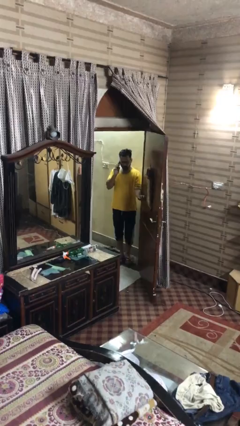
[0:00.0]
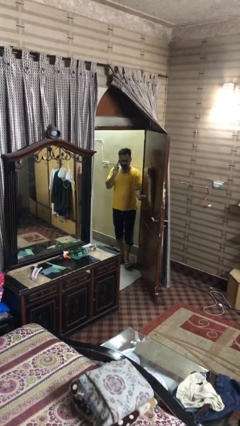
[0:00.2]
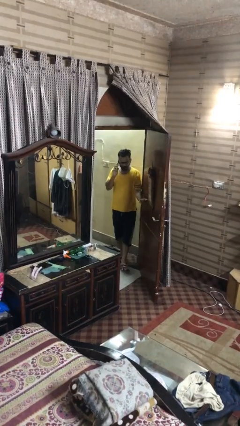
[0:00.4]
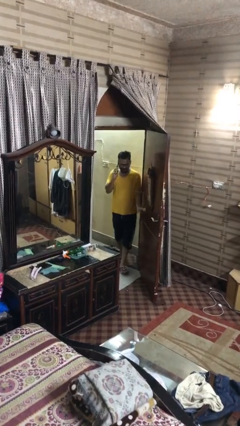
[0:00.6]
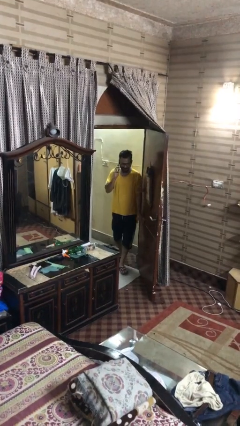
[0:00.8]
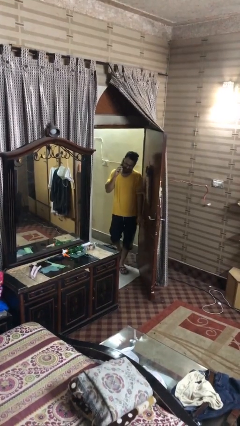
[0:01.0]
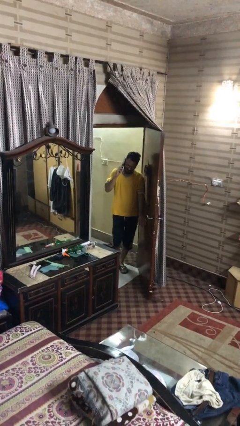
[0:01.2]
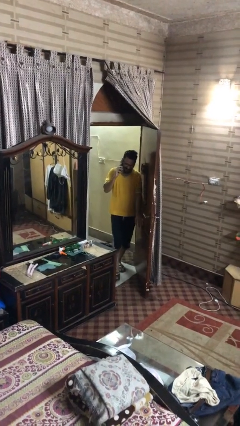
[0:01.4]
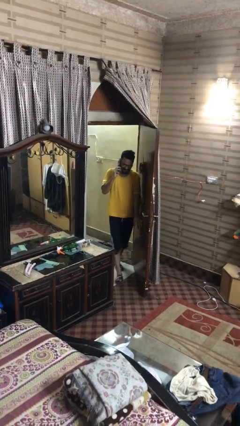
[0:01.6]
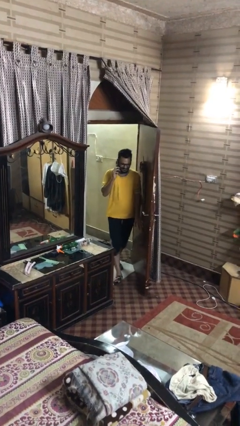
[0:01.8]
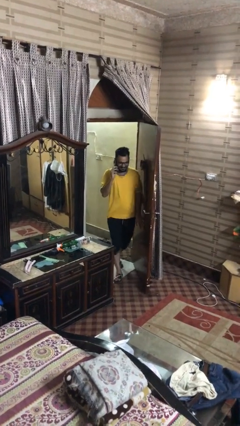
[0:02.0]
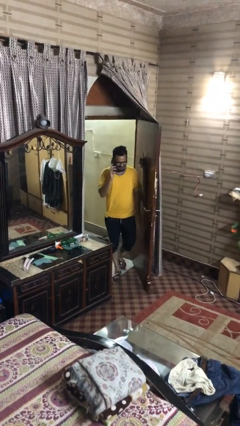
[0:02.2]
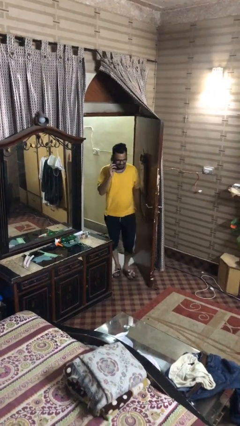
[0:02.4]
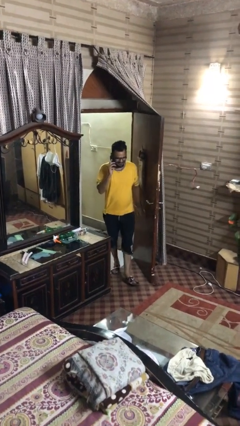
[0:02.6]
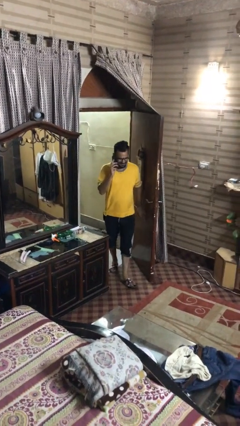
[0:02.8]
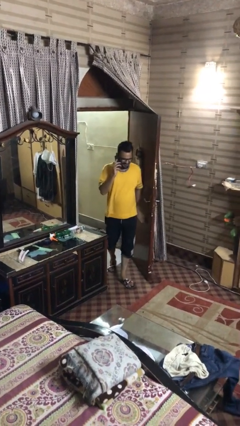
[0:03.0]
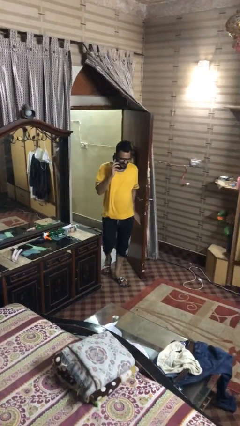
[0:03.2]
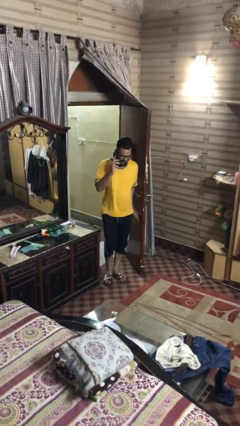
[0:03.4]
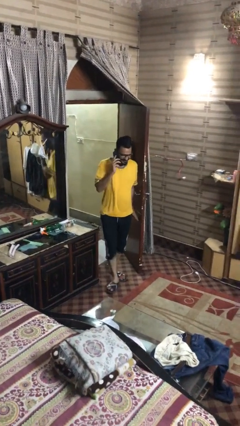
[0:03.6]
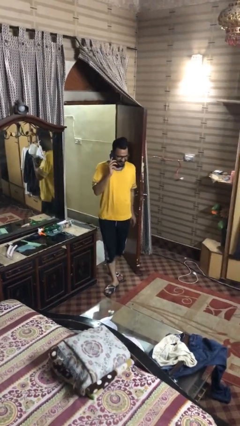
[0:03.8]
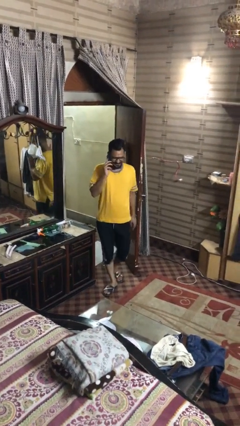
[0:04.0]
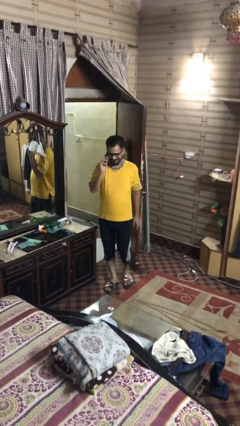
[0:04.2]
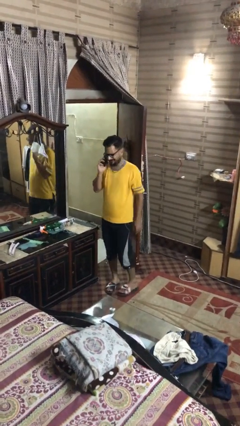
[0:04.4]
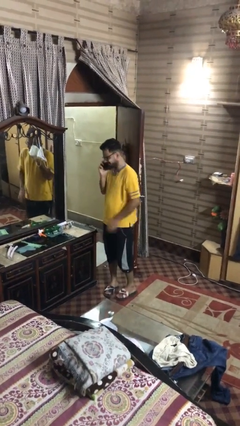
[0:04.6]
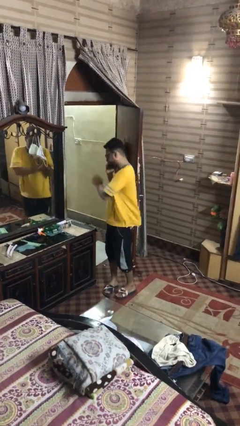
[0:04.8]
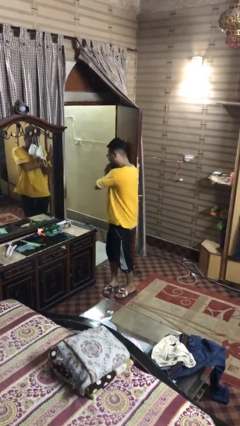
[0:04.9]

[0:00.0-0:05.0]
person enters scene through structure

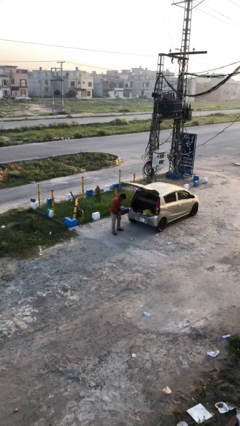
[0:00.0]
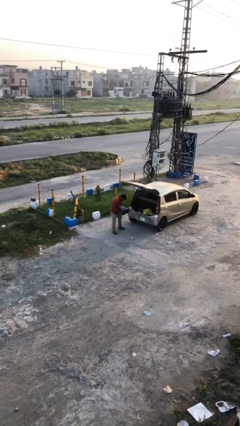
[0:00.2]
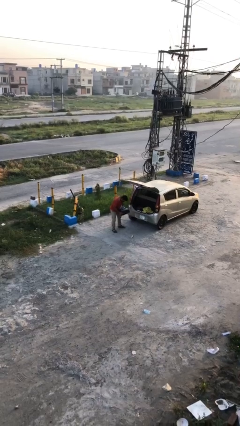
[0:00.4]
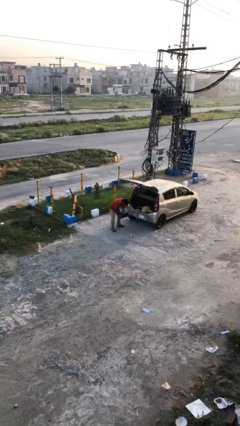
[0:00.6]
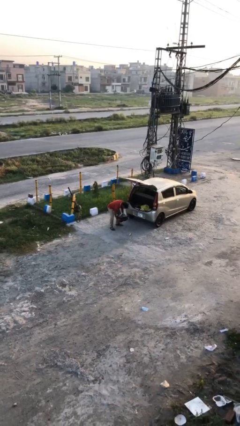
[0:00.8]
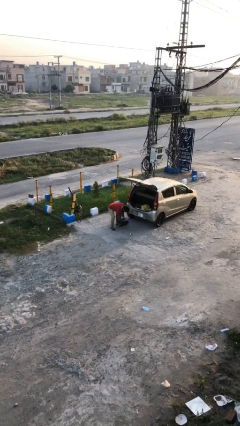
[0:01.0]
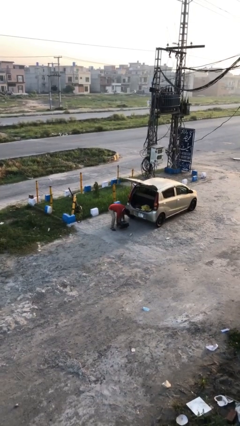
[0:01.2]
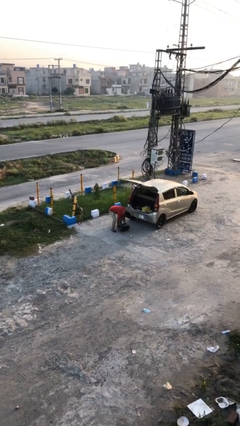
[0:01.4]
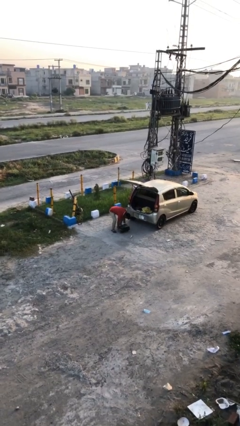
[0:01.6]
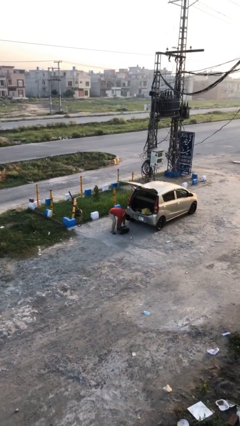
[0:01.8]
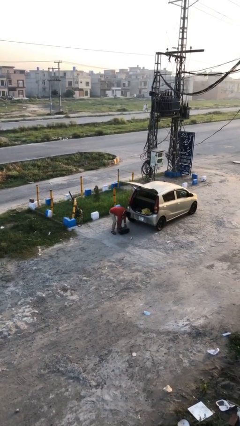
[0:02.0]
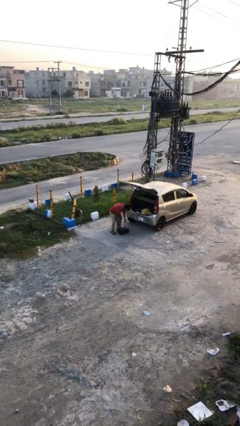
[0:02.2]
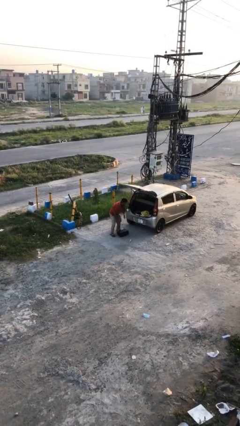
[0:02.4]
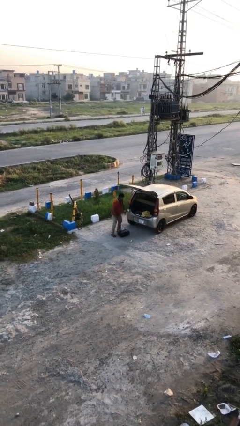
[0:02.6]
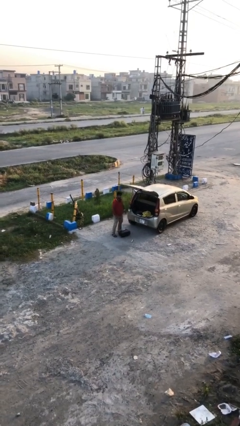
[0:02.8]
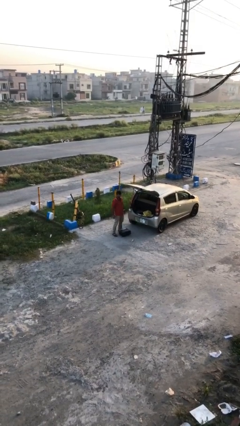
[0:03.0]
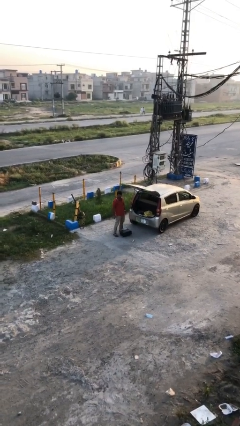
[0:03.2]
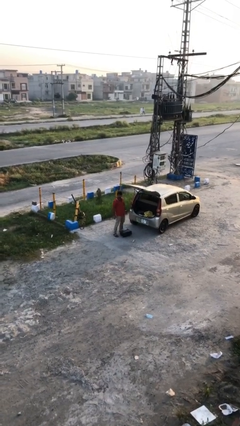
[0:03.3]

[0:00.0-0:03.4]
person puts down object on floor

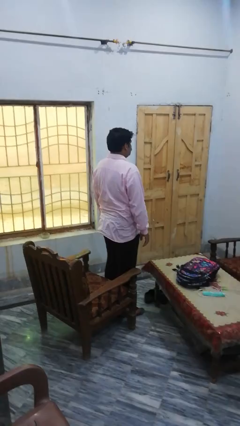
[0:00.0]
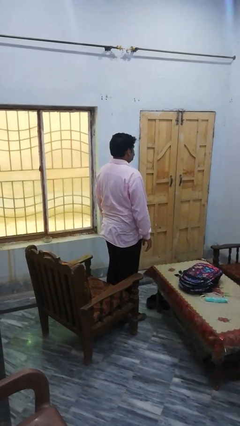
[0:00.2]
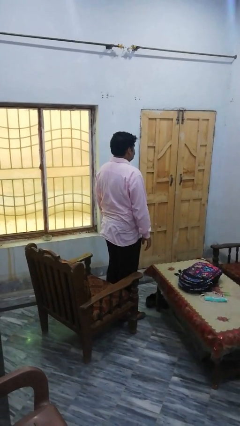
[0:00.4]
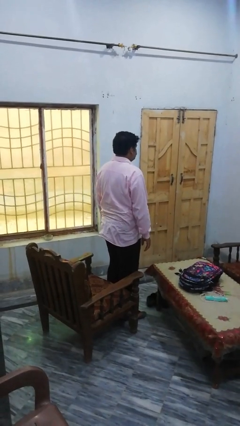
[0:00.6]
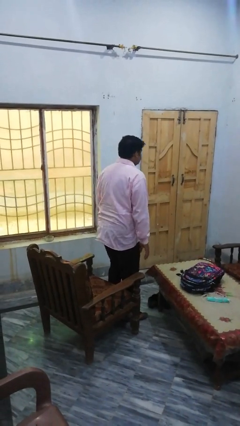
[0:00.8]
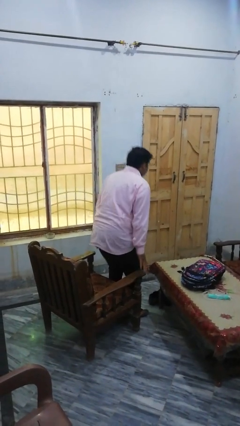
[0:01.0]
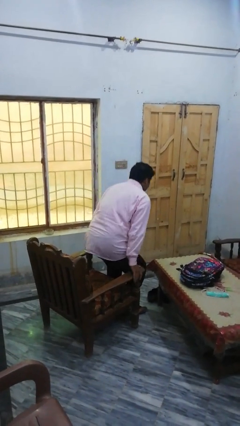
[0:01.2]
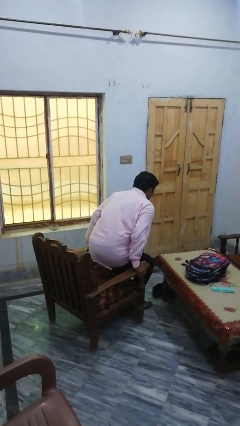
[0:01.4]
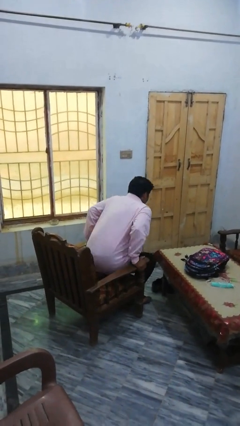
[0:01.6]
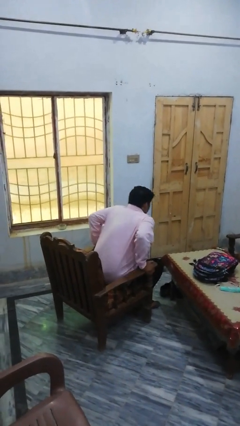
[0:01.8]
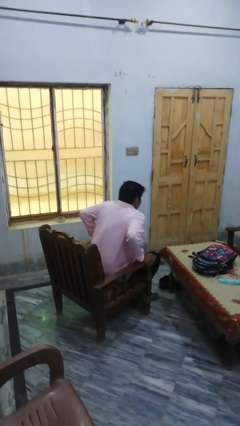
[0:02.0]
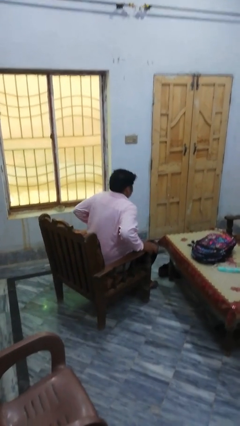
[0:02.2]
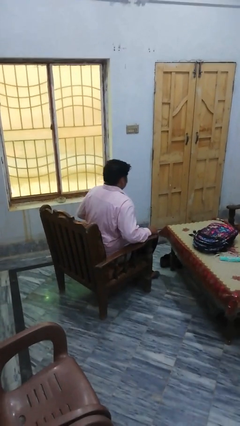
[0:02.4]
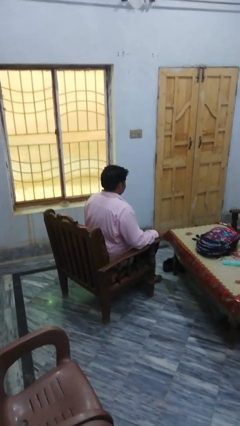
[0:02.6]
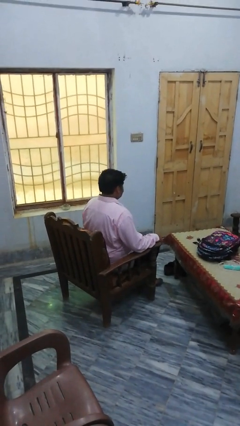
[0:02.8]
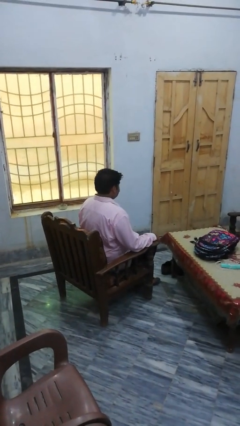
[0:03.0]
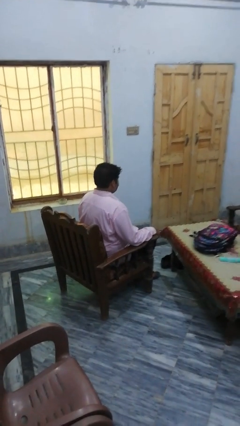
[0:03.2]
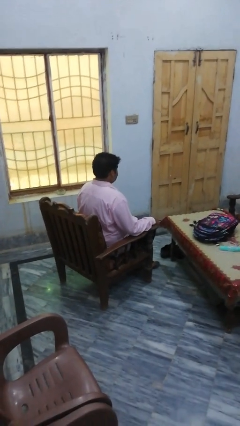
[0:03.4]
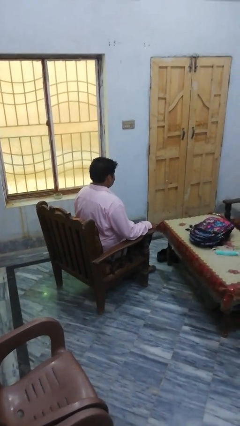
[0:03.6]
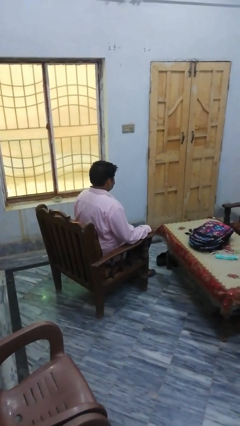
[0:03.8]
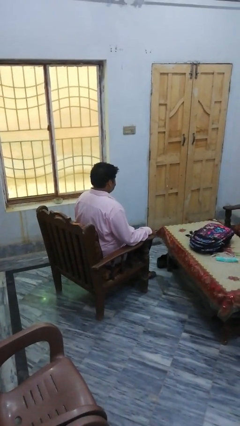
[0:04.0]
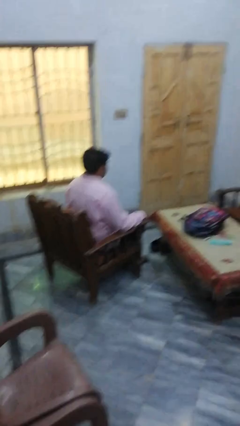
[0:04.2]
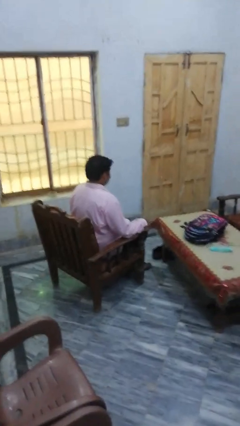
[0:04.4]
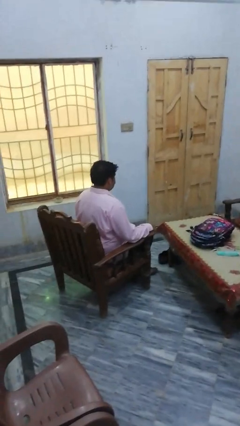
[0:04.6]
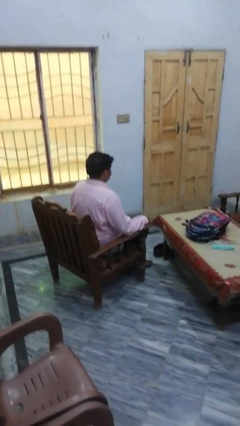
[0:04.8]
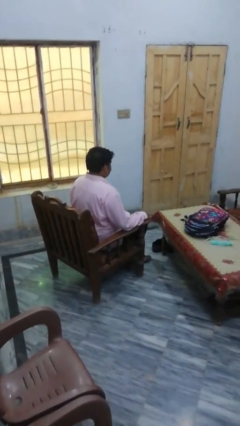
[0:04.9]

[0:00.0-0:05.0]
person lies down on couch

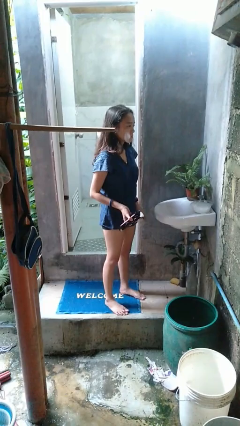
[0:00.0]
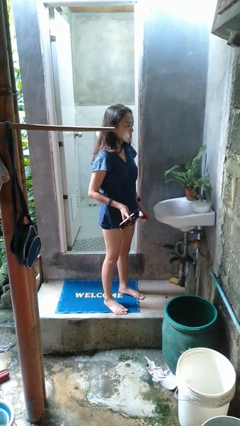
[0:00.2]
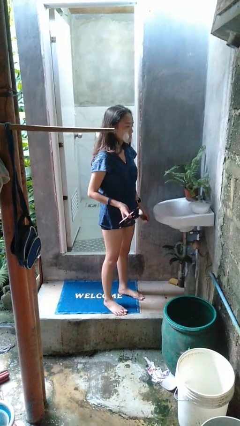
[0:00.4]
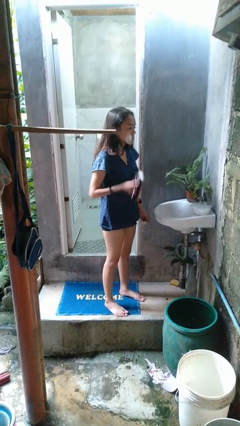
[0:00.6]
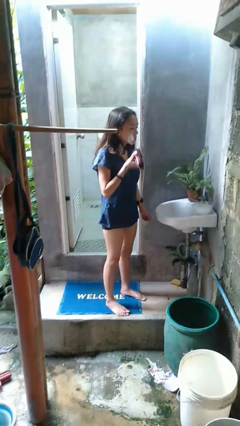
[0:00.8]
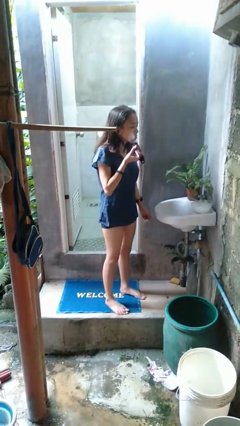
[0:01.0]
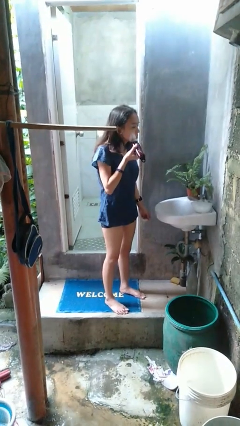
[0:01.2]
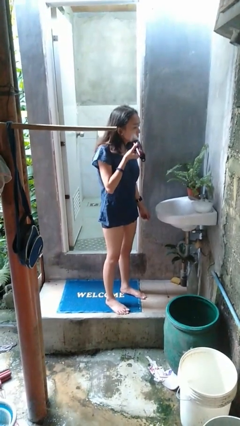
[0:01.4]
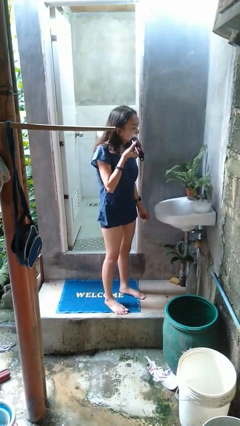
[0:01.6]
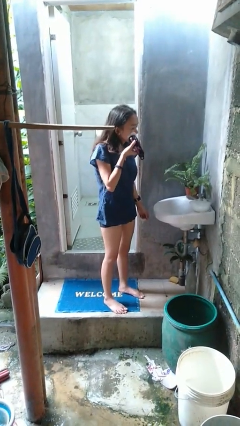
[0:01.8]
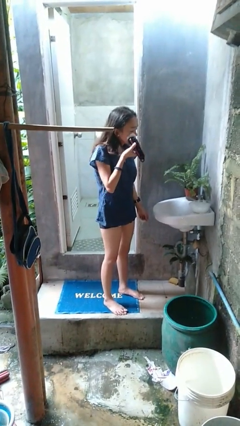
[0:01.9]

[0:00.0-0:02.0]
person shaves face

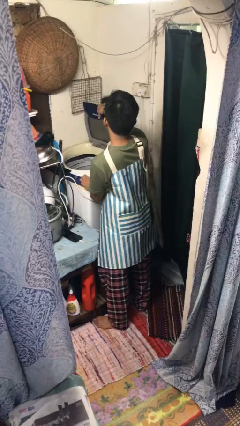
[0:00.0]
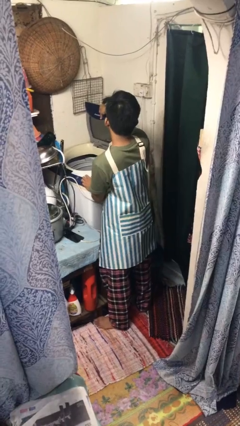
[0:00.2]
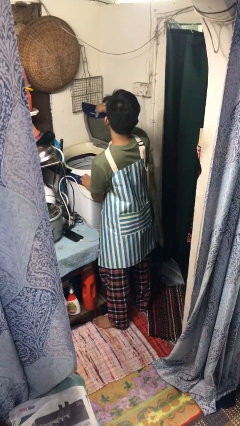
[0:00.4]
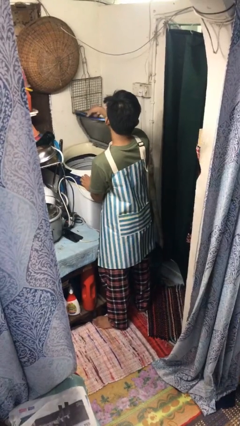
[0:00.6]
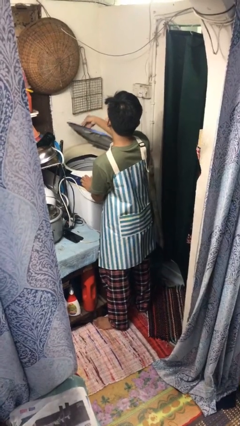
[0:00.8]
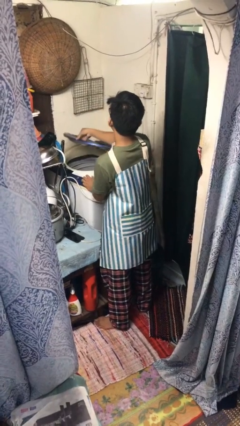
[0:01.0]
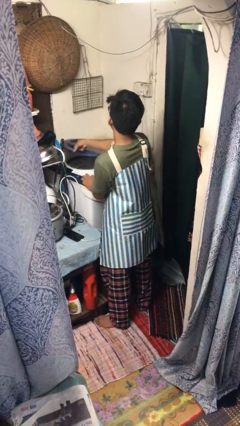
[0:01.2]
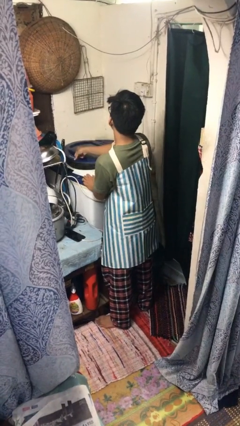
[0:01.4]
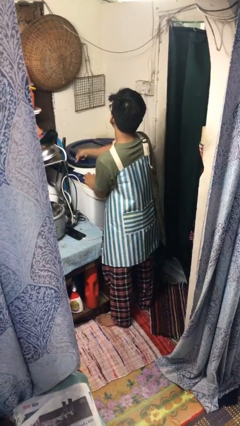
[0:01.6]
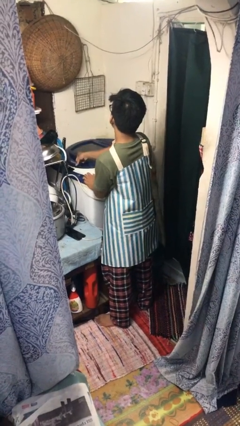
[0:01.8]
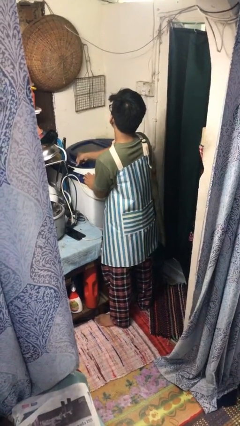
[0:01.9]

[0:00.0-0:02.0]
person closes clothes washer
